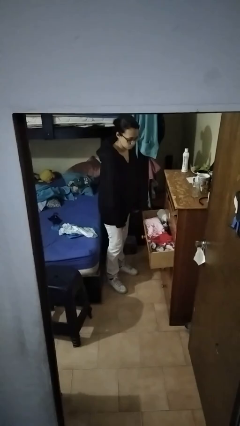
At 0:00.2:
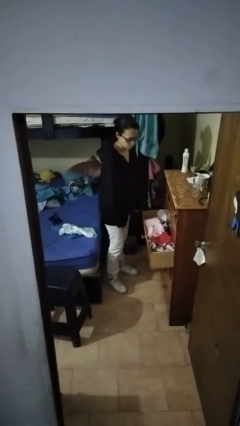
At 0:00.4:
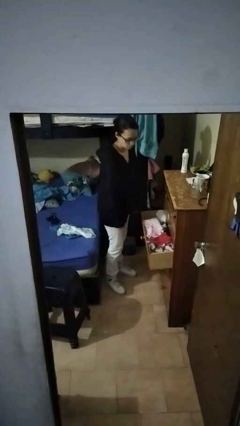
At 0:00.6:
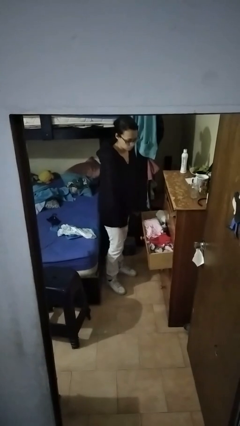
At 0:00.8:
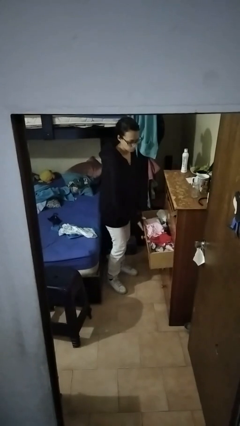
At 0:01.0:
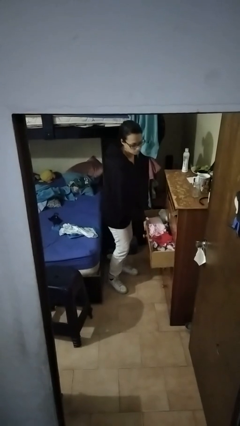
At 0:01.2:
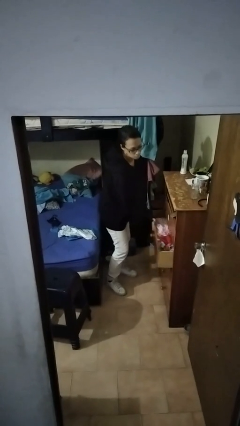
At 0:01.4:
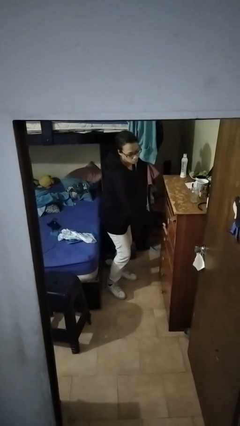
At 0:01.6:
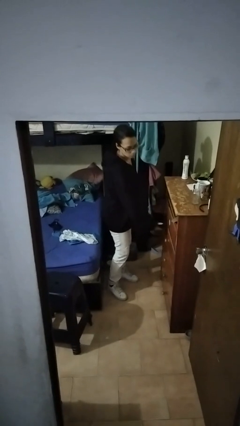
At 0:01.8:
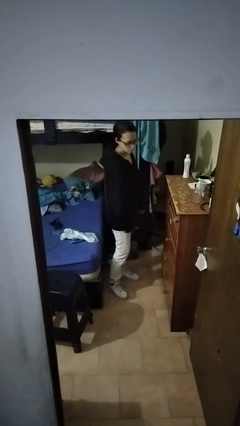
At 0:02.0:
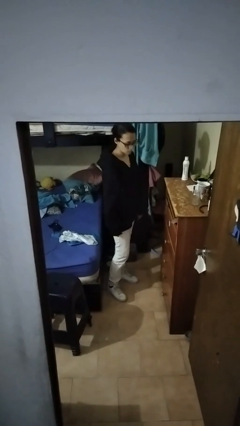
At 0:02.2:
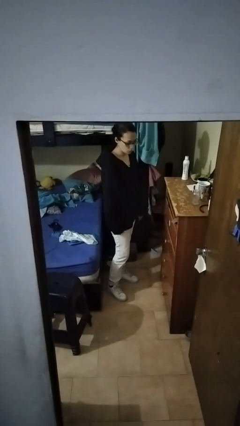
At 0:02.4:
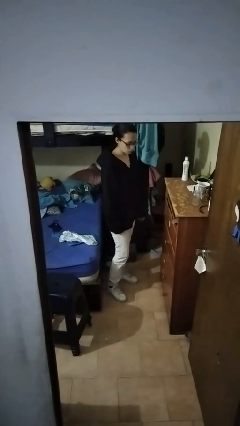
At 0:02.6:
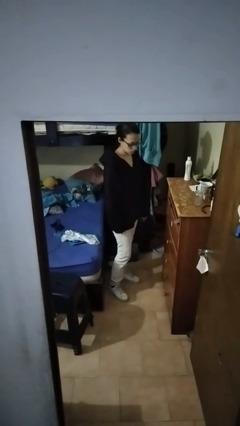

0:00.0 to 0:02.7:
person closes dresser drawer

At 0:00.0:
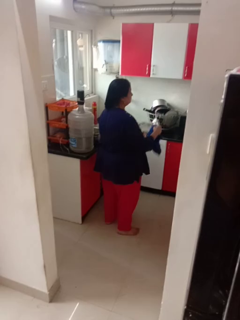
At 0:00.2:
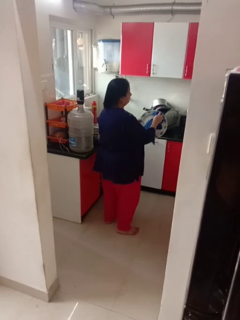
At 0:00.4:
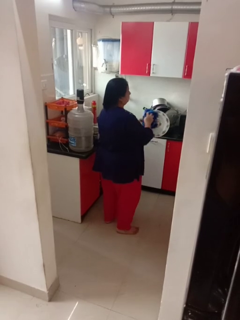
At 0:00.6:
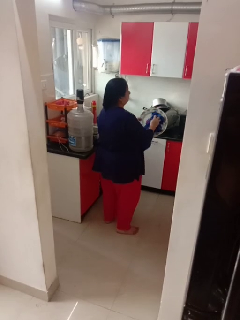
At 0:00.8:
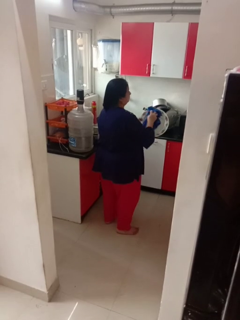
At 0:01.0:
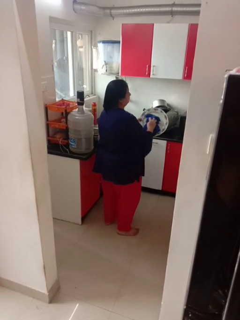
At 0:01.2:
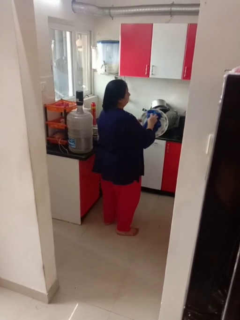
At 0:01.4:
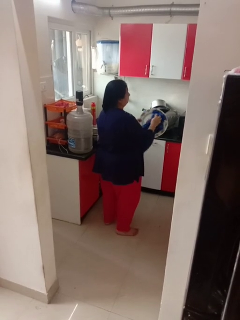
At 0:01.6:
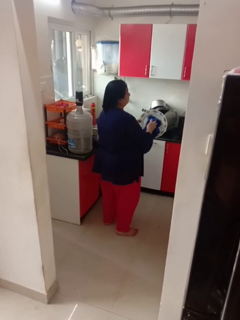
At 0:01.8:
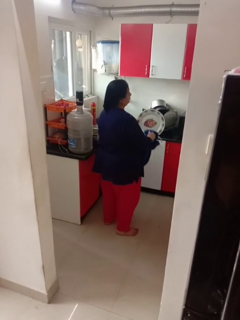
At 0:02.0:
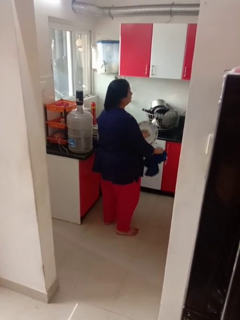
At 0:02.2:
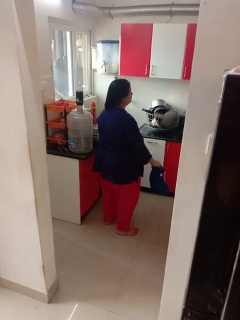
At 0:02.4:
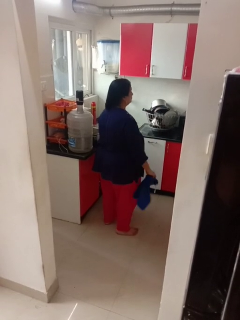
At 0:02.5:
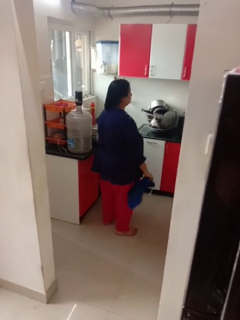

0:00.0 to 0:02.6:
person dries dish

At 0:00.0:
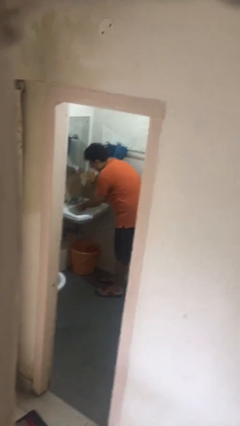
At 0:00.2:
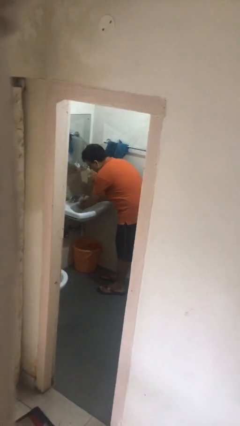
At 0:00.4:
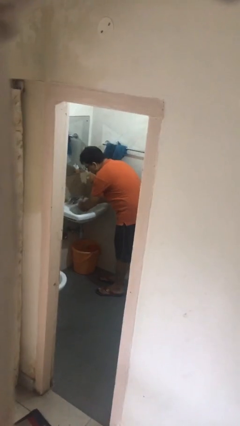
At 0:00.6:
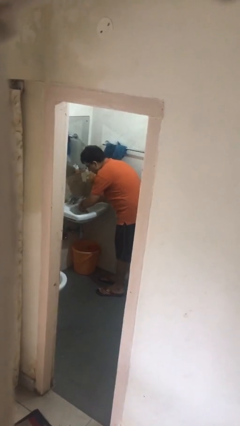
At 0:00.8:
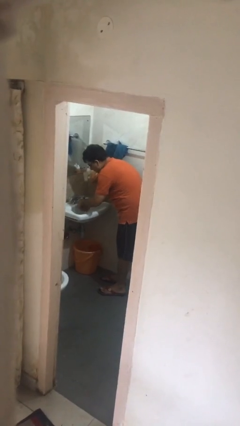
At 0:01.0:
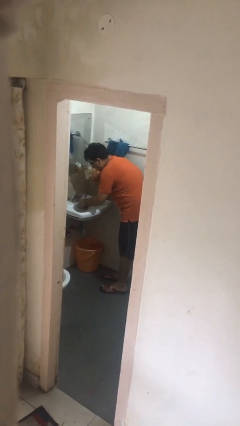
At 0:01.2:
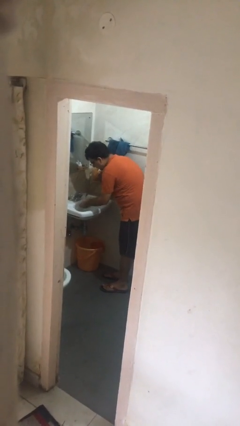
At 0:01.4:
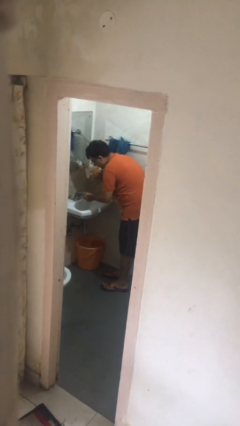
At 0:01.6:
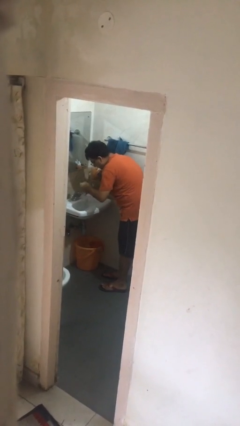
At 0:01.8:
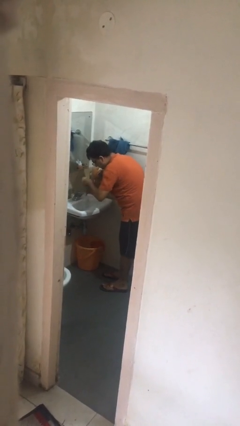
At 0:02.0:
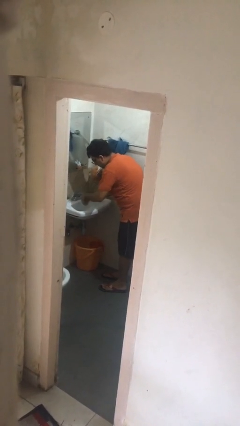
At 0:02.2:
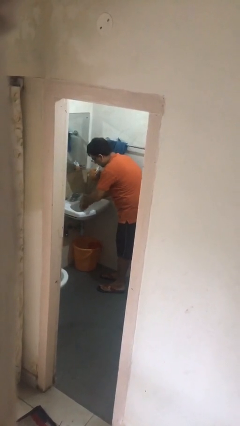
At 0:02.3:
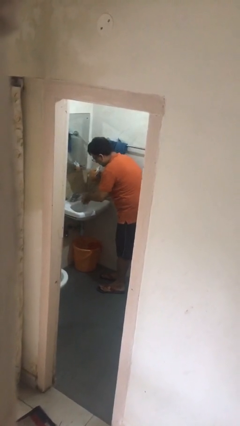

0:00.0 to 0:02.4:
person washes hands

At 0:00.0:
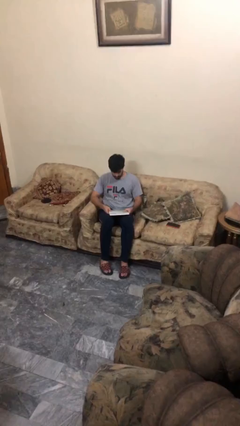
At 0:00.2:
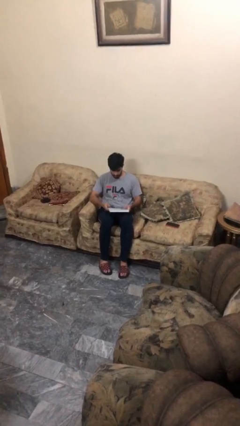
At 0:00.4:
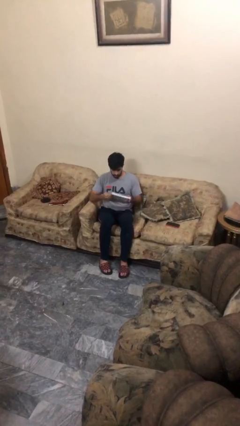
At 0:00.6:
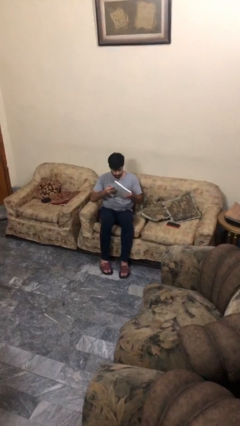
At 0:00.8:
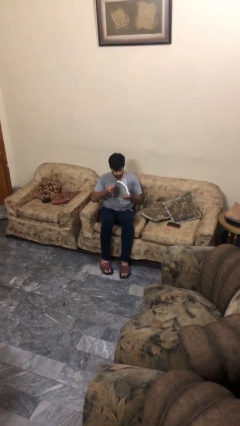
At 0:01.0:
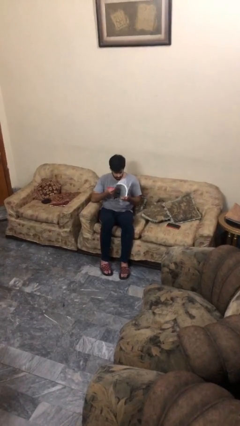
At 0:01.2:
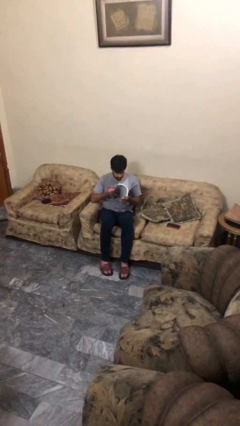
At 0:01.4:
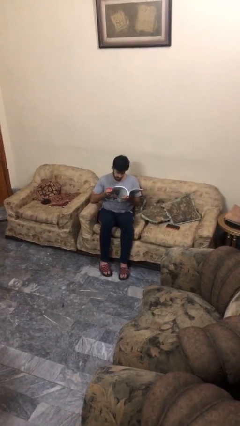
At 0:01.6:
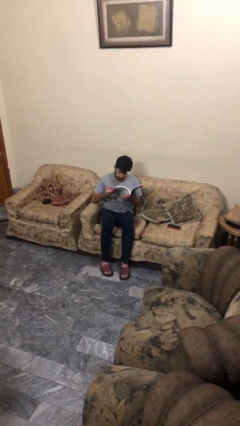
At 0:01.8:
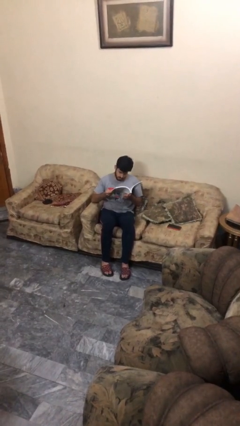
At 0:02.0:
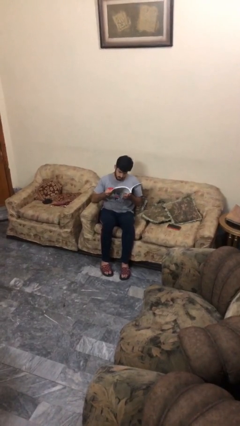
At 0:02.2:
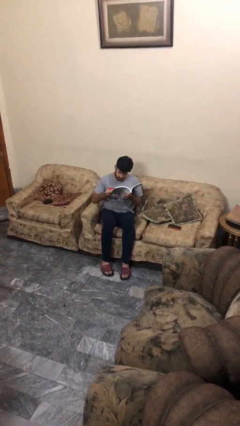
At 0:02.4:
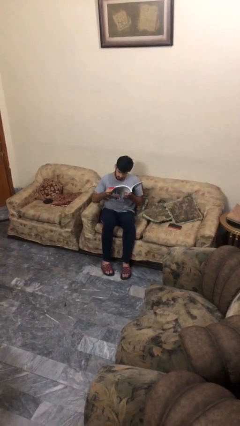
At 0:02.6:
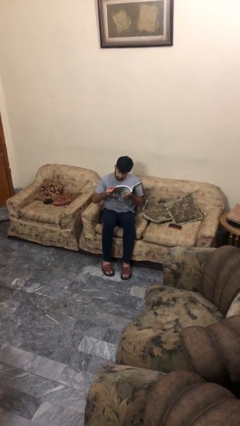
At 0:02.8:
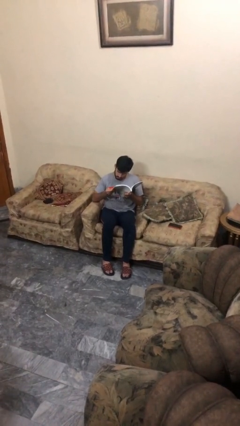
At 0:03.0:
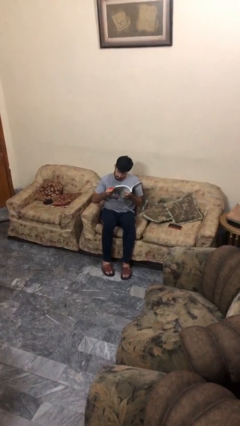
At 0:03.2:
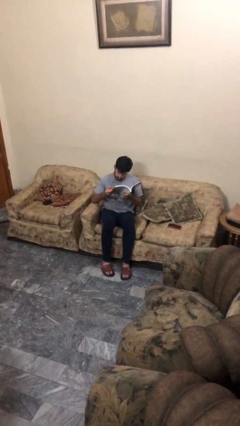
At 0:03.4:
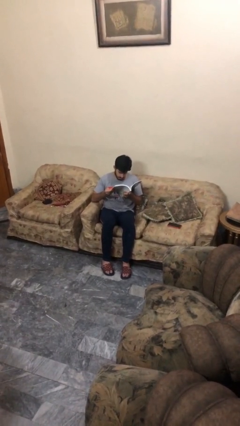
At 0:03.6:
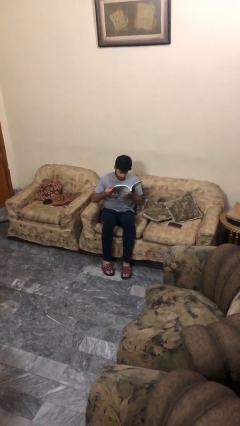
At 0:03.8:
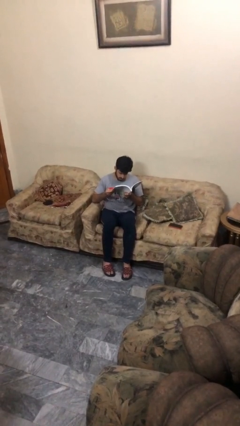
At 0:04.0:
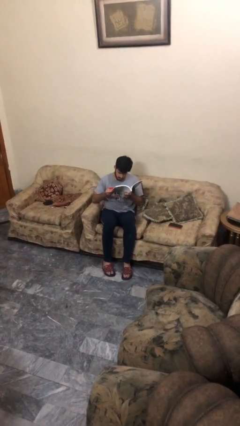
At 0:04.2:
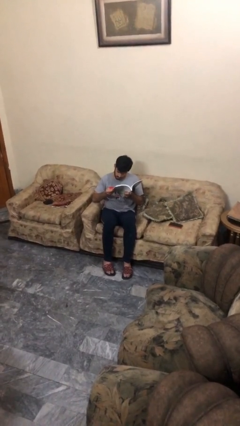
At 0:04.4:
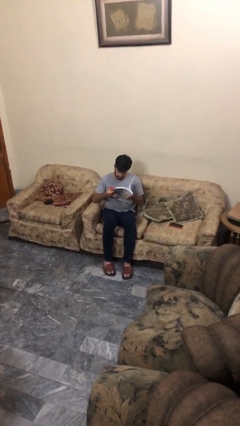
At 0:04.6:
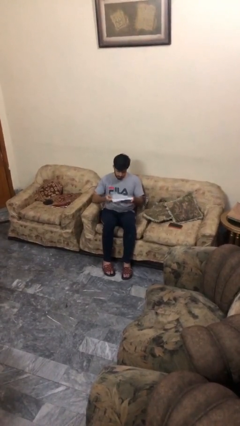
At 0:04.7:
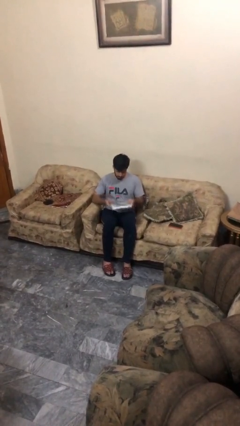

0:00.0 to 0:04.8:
person reads book

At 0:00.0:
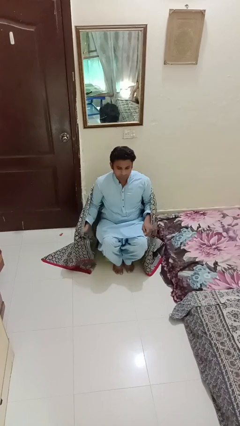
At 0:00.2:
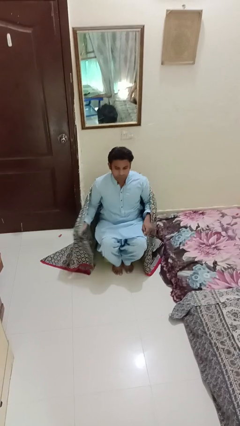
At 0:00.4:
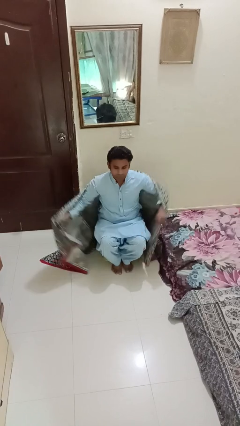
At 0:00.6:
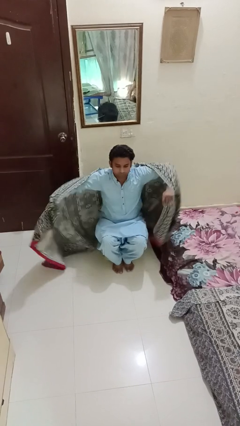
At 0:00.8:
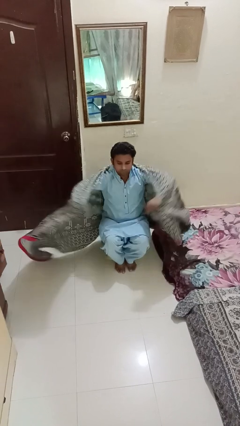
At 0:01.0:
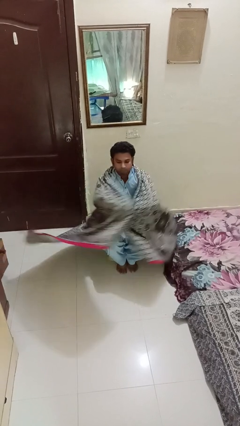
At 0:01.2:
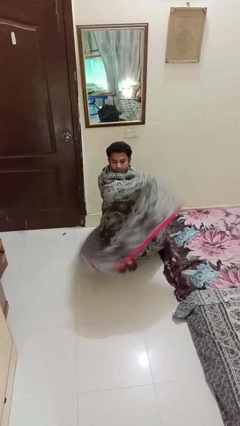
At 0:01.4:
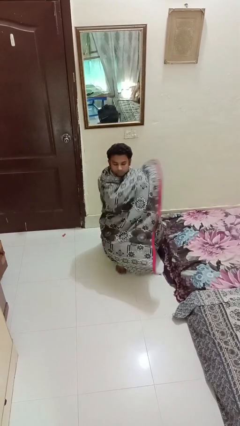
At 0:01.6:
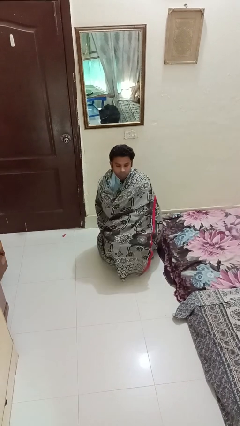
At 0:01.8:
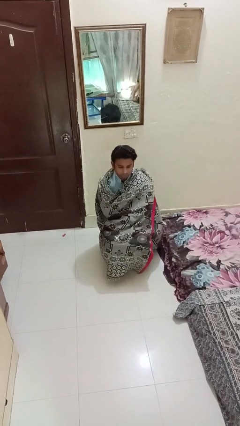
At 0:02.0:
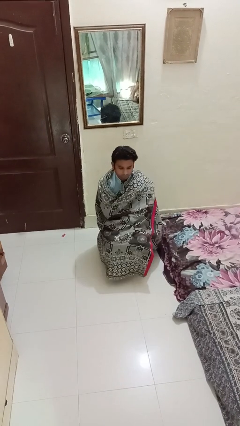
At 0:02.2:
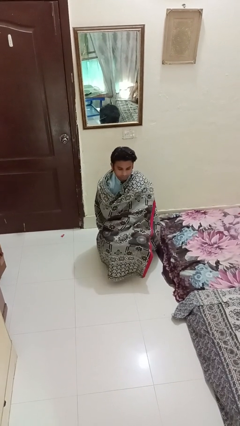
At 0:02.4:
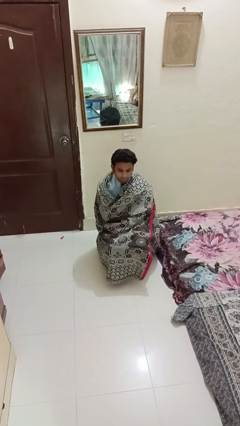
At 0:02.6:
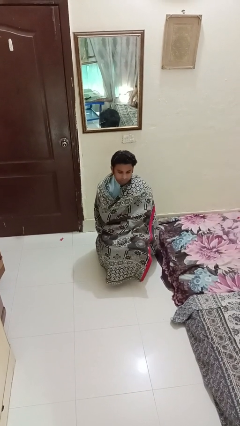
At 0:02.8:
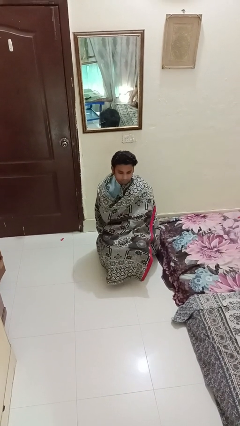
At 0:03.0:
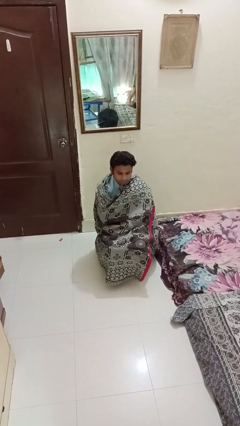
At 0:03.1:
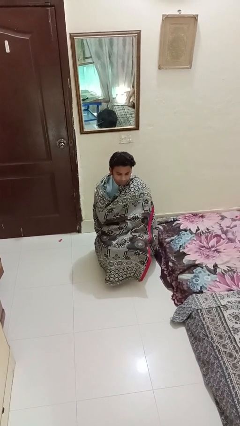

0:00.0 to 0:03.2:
person covers with blanket

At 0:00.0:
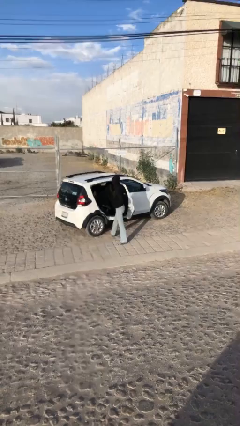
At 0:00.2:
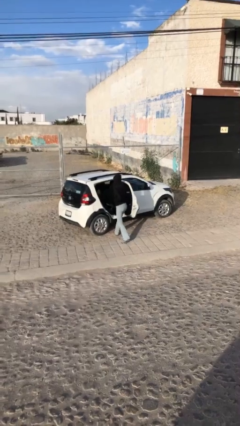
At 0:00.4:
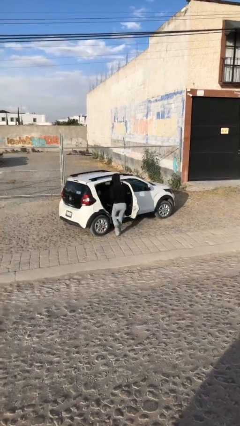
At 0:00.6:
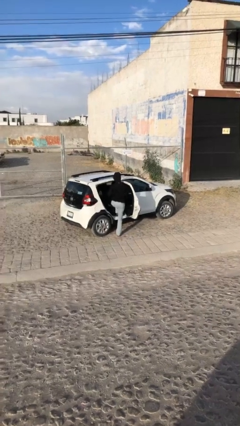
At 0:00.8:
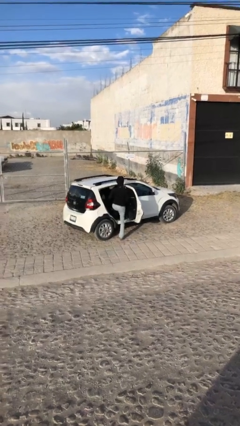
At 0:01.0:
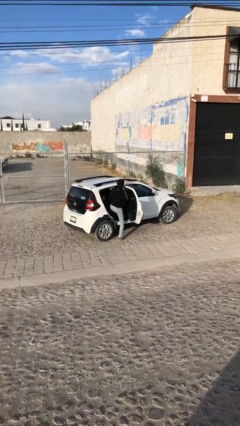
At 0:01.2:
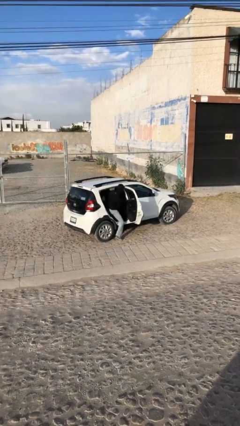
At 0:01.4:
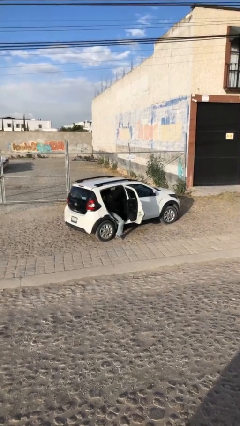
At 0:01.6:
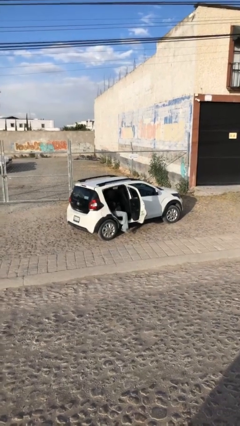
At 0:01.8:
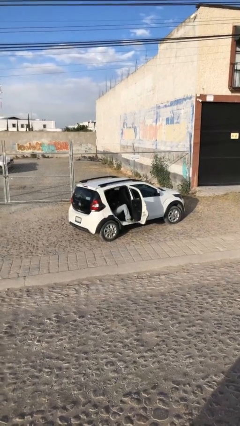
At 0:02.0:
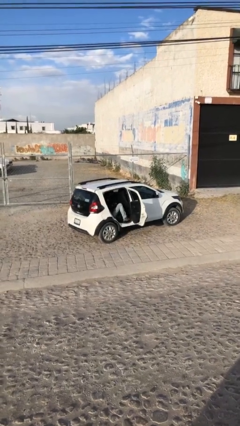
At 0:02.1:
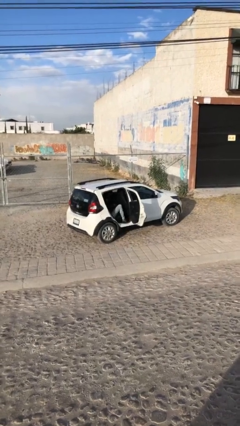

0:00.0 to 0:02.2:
person enters car
